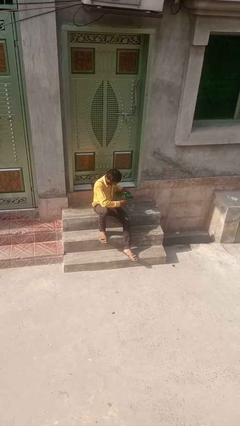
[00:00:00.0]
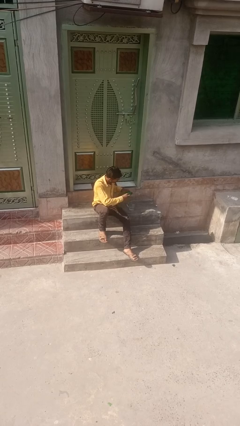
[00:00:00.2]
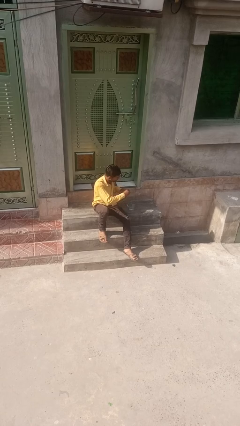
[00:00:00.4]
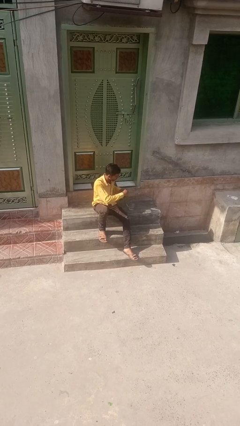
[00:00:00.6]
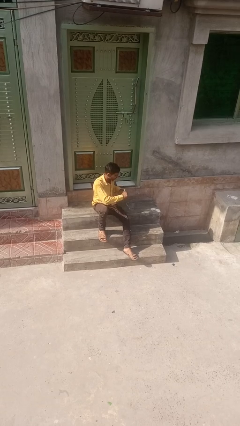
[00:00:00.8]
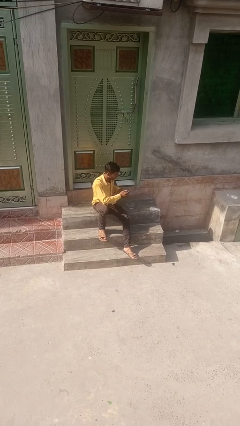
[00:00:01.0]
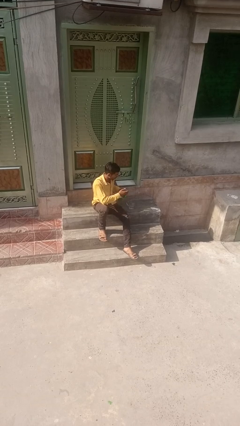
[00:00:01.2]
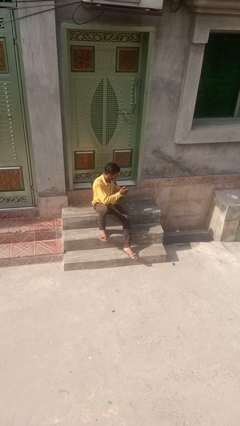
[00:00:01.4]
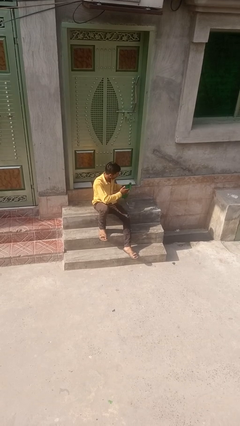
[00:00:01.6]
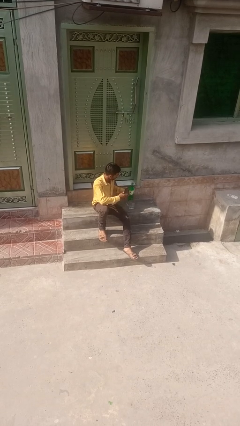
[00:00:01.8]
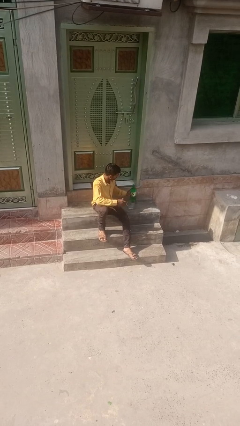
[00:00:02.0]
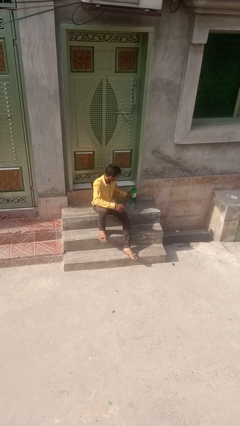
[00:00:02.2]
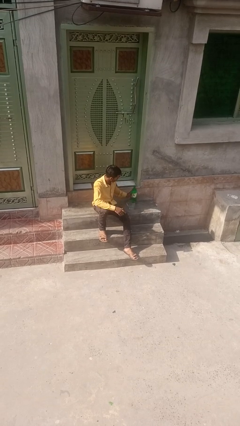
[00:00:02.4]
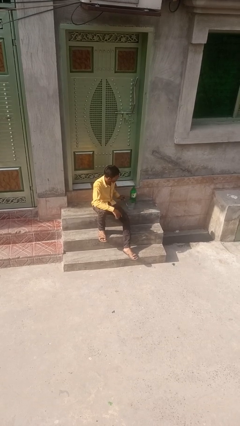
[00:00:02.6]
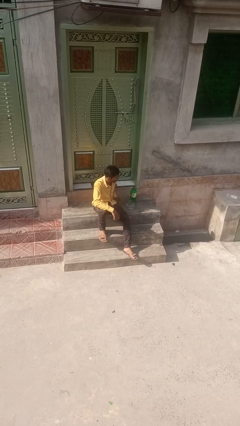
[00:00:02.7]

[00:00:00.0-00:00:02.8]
person screws lid to bottle

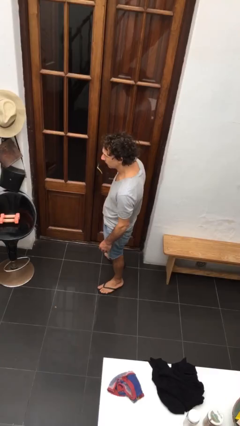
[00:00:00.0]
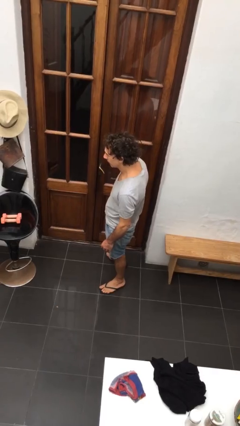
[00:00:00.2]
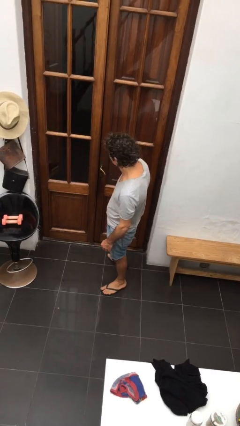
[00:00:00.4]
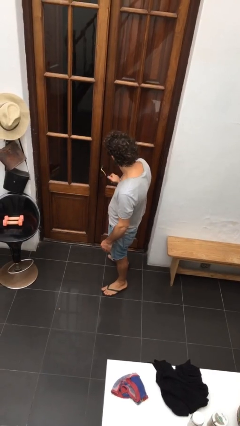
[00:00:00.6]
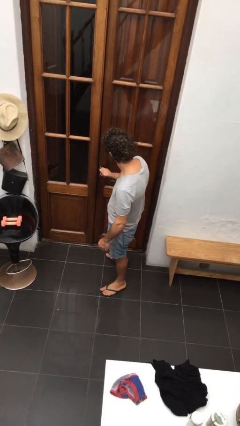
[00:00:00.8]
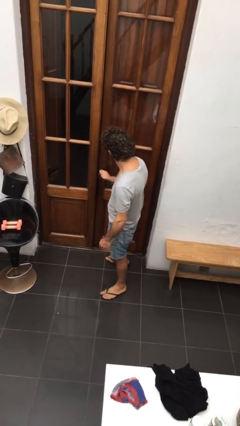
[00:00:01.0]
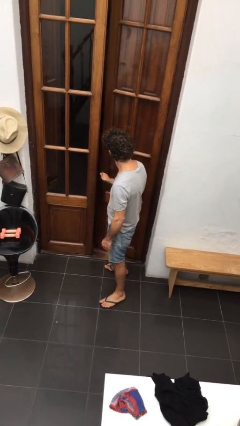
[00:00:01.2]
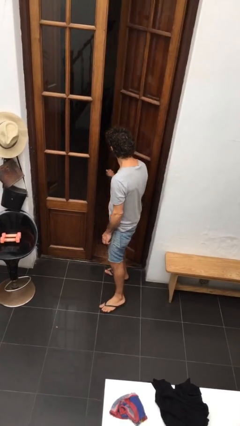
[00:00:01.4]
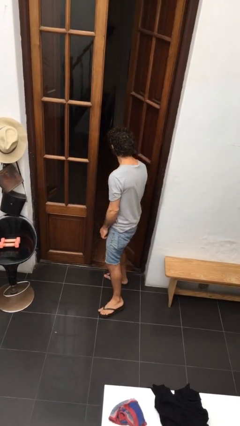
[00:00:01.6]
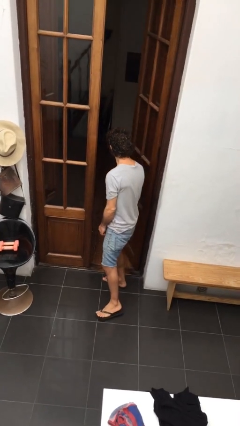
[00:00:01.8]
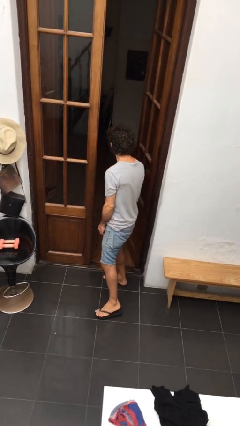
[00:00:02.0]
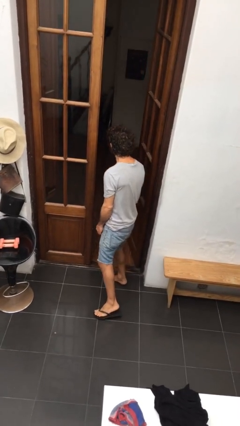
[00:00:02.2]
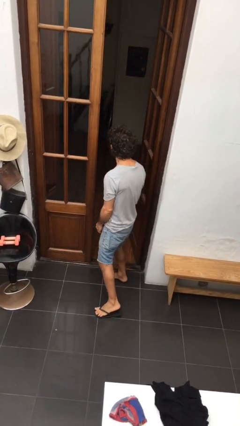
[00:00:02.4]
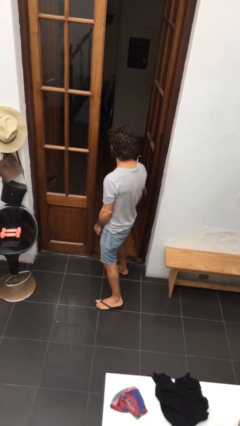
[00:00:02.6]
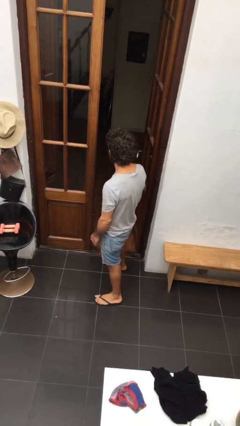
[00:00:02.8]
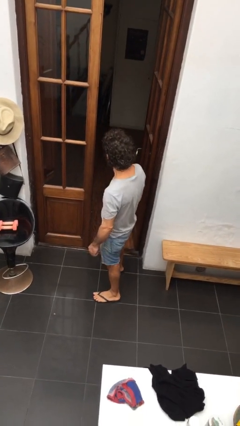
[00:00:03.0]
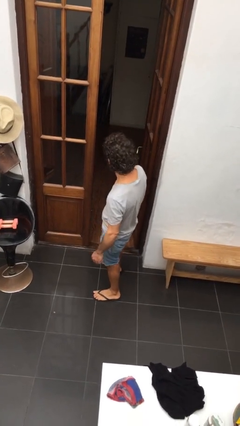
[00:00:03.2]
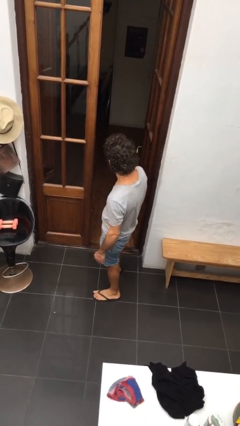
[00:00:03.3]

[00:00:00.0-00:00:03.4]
person opens facility door

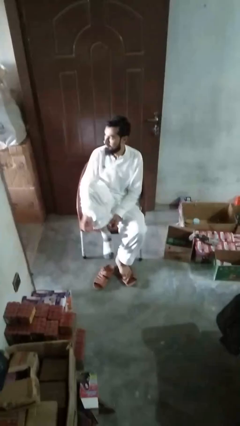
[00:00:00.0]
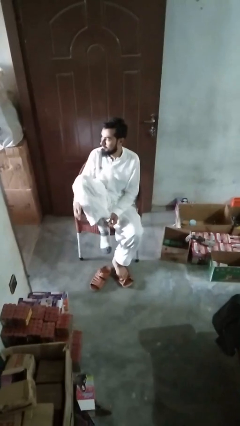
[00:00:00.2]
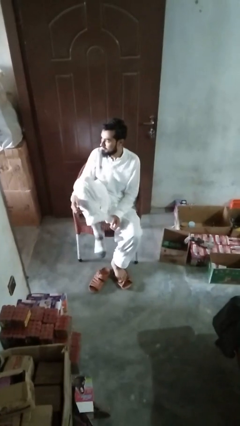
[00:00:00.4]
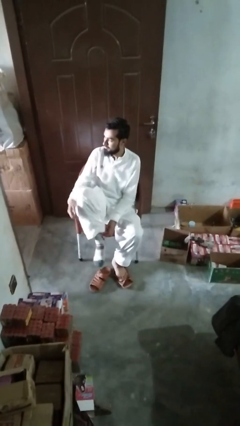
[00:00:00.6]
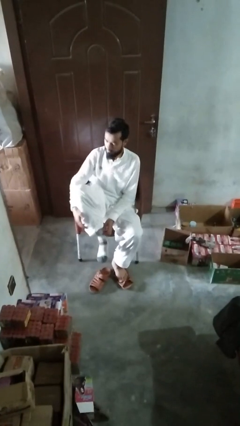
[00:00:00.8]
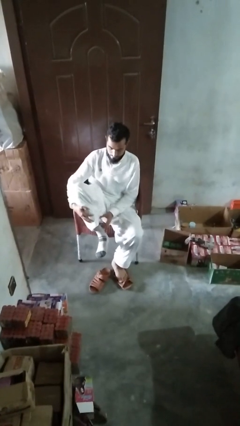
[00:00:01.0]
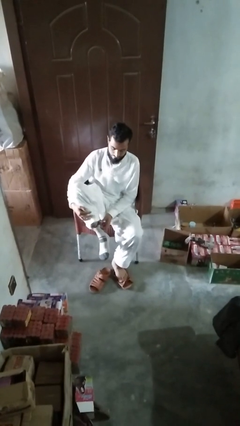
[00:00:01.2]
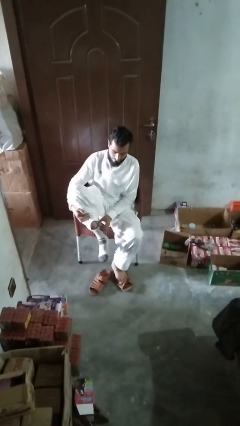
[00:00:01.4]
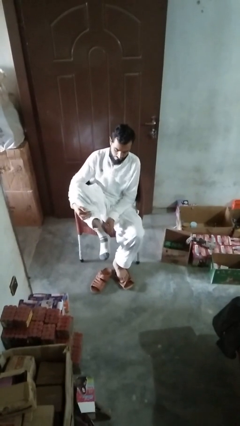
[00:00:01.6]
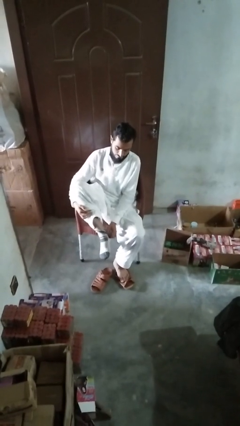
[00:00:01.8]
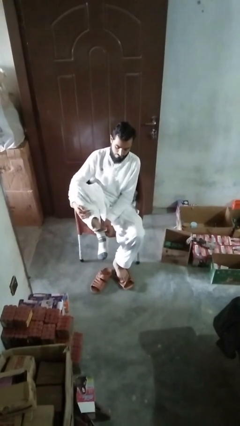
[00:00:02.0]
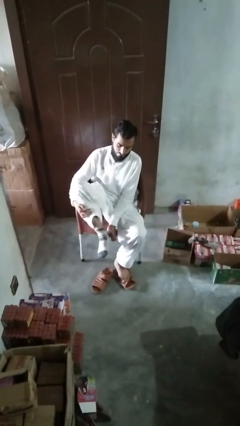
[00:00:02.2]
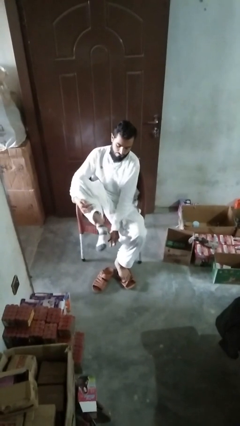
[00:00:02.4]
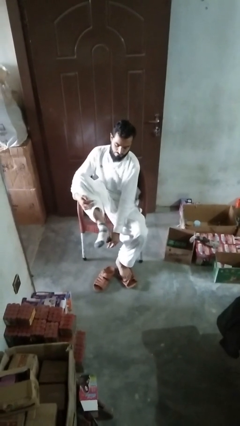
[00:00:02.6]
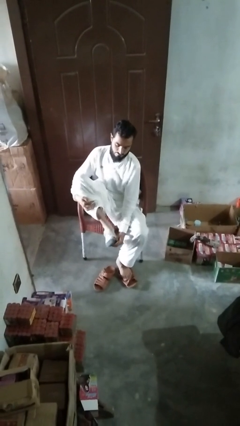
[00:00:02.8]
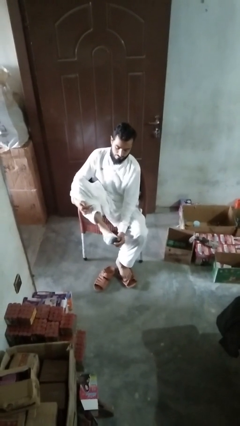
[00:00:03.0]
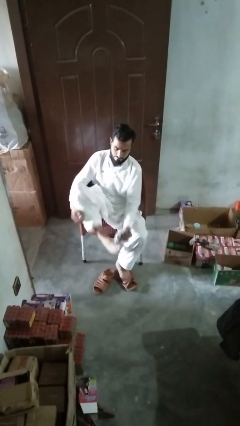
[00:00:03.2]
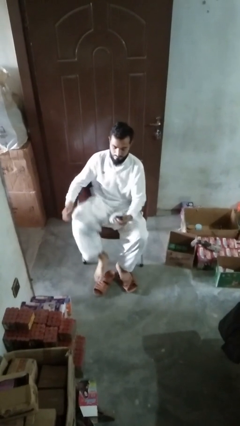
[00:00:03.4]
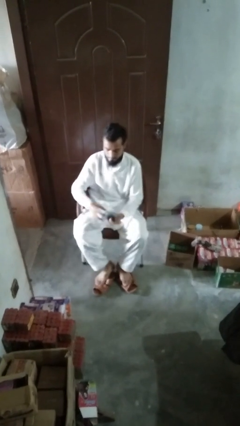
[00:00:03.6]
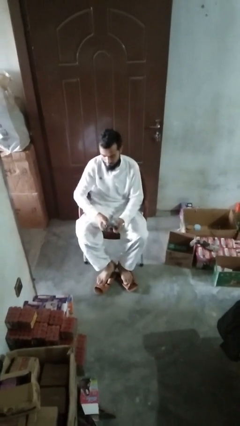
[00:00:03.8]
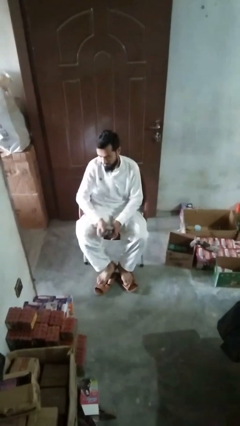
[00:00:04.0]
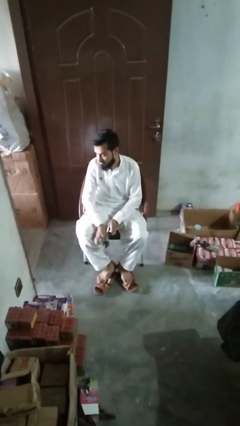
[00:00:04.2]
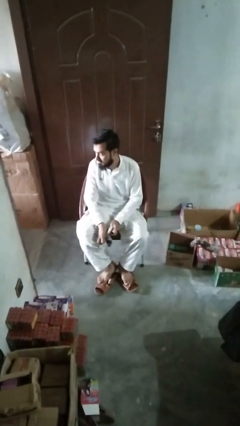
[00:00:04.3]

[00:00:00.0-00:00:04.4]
person takes off socks

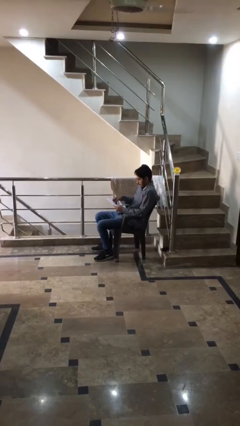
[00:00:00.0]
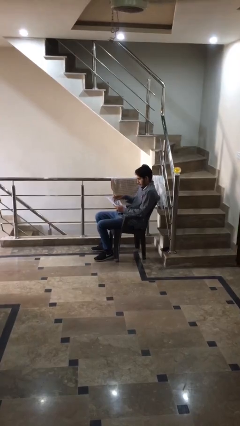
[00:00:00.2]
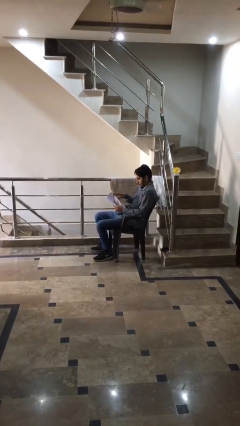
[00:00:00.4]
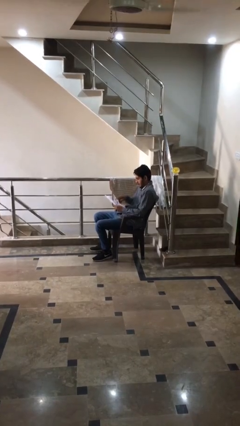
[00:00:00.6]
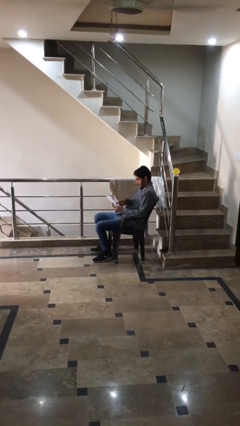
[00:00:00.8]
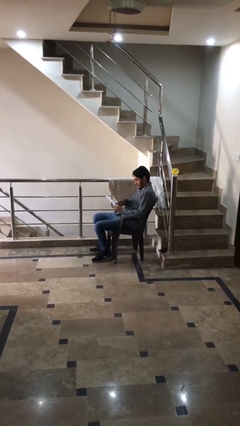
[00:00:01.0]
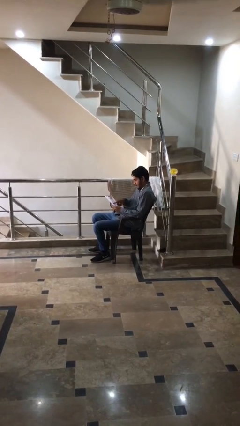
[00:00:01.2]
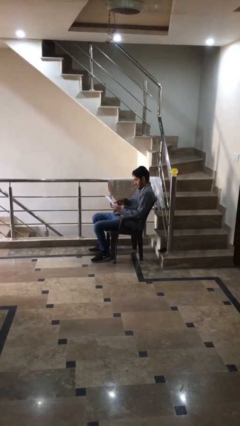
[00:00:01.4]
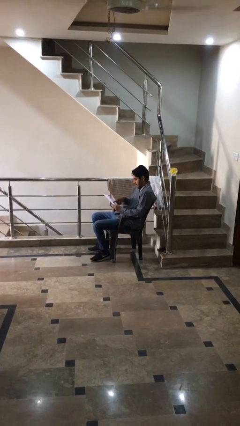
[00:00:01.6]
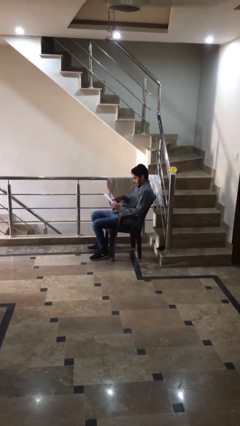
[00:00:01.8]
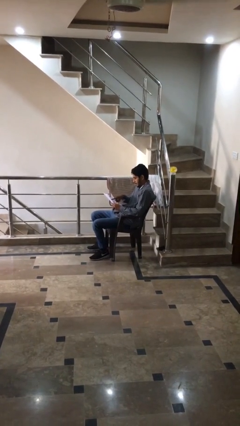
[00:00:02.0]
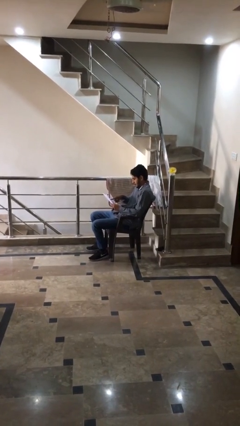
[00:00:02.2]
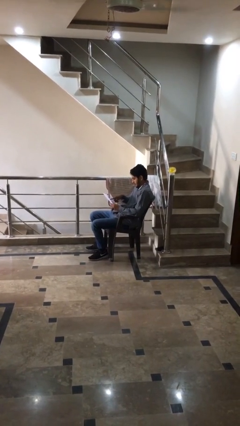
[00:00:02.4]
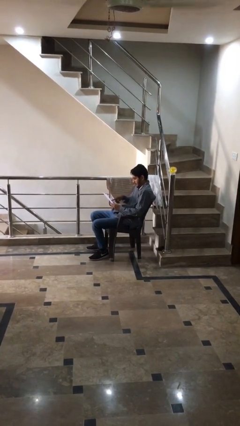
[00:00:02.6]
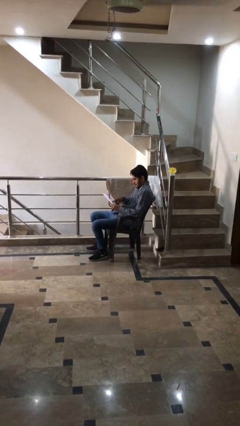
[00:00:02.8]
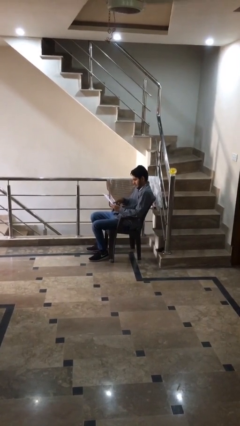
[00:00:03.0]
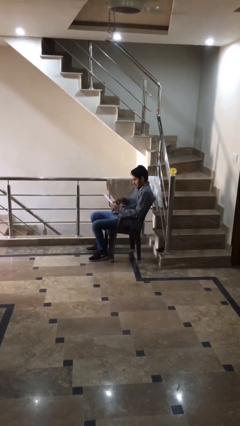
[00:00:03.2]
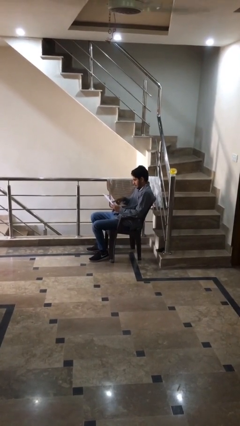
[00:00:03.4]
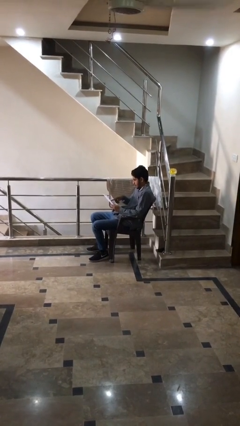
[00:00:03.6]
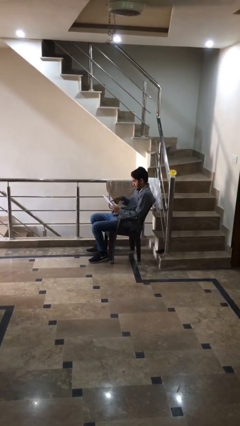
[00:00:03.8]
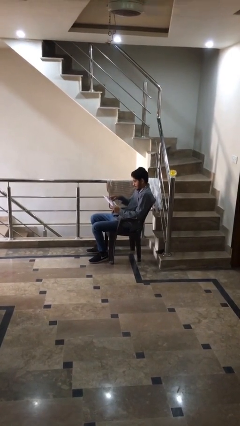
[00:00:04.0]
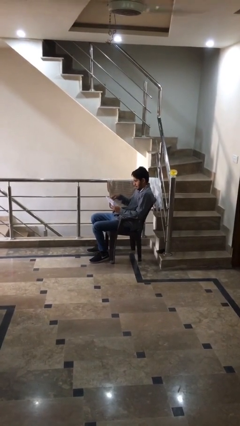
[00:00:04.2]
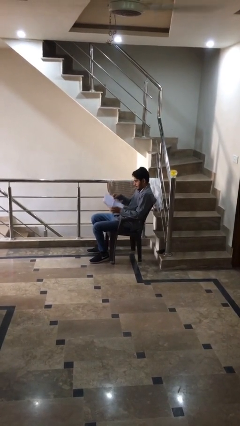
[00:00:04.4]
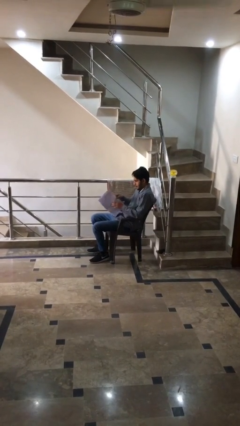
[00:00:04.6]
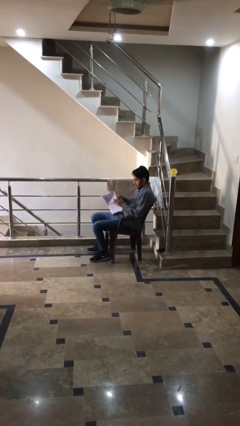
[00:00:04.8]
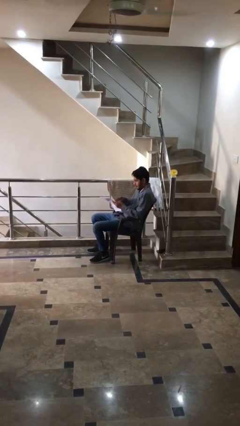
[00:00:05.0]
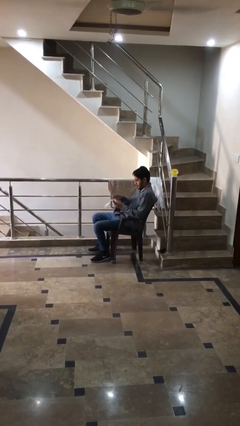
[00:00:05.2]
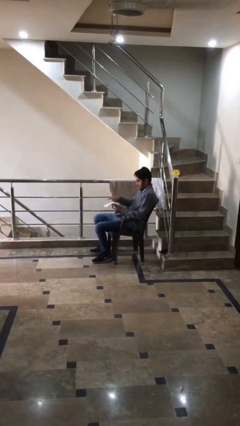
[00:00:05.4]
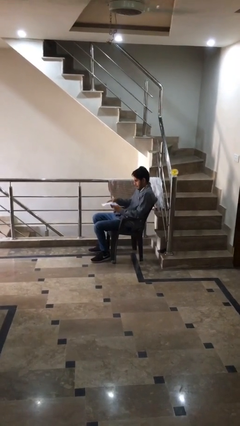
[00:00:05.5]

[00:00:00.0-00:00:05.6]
person reads document

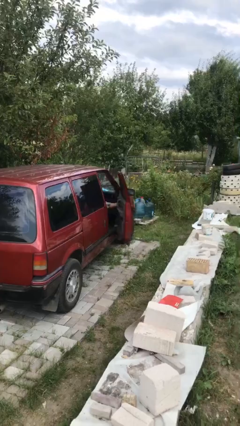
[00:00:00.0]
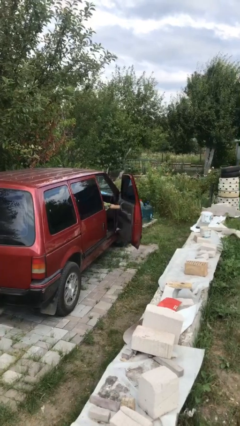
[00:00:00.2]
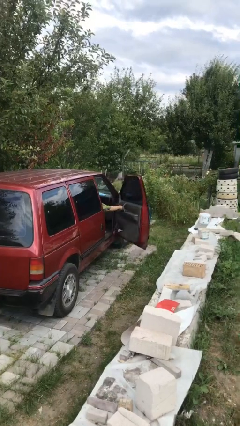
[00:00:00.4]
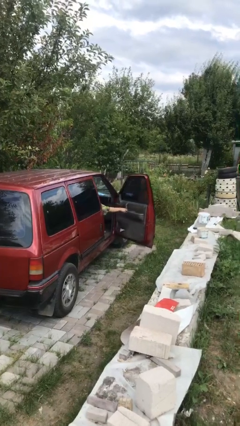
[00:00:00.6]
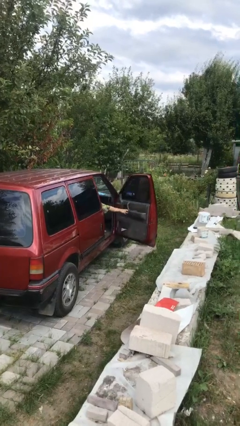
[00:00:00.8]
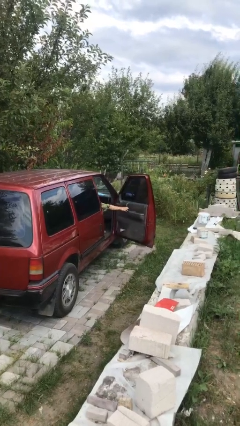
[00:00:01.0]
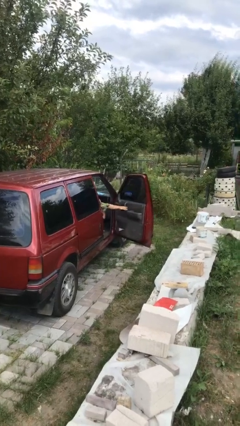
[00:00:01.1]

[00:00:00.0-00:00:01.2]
person opens car door

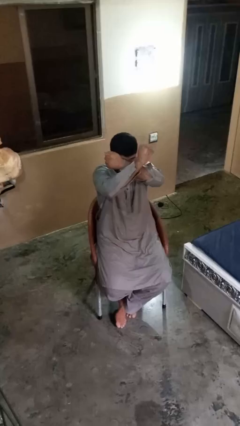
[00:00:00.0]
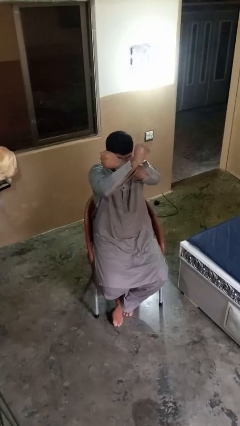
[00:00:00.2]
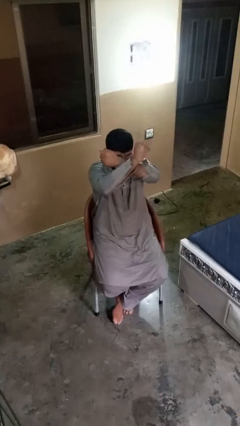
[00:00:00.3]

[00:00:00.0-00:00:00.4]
person gestures arms x
